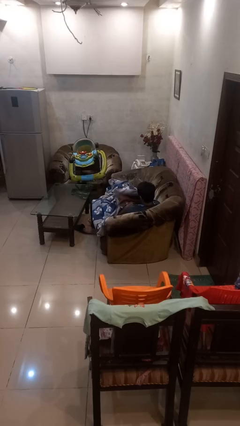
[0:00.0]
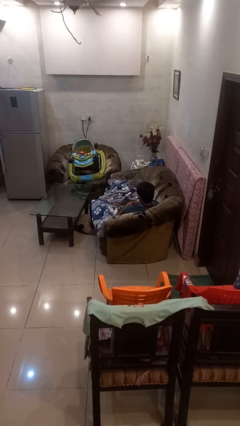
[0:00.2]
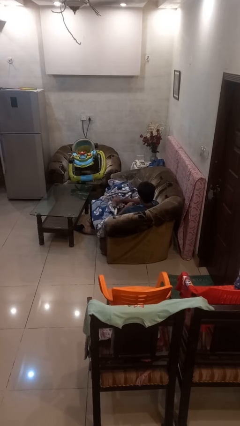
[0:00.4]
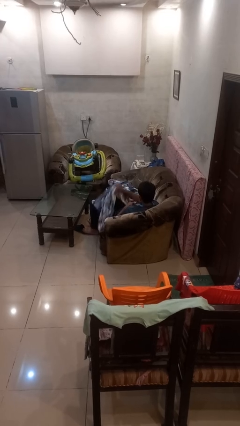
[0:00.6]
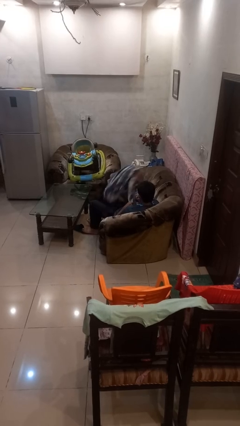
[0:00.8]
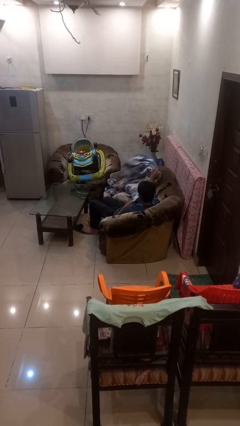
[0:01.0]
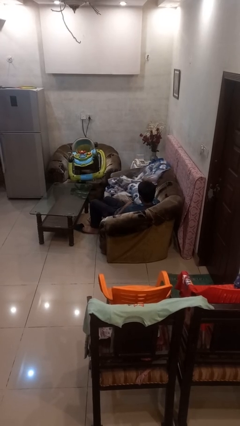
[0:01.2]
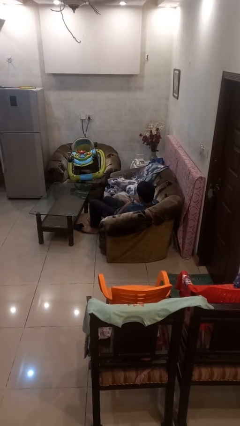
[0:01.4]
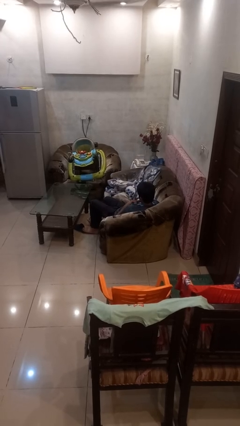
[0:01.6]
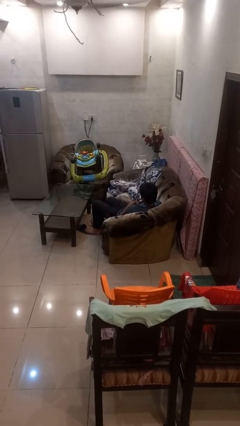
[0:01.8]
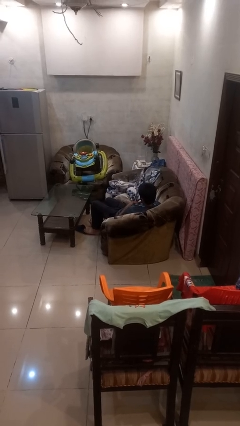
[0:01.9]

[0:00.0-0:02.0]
person uncovers with blanket

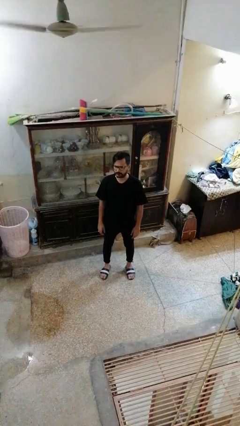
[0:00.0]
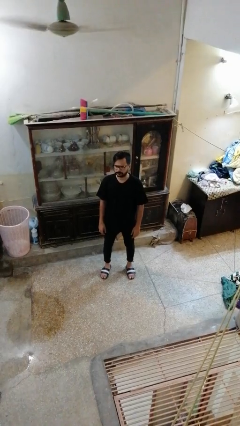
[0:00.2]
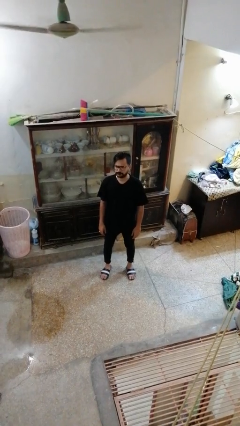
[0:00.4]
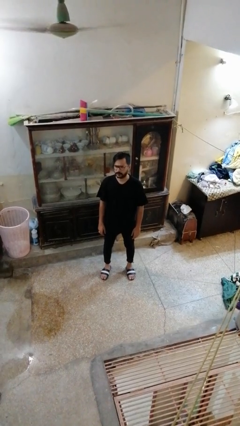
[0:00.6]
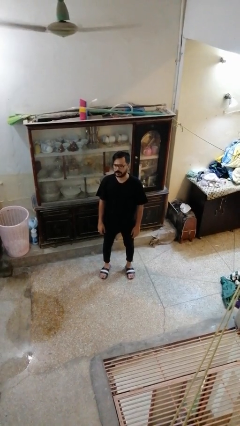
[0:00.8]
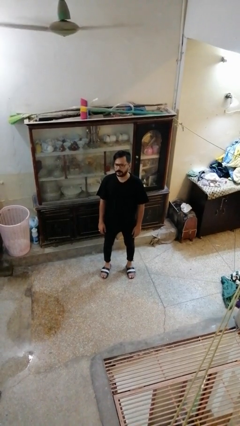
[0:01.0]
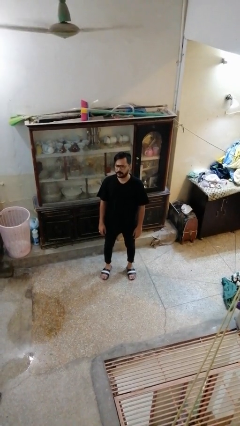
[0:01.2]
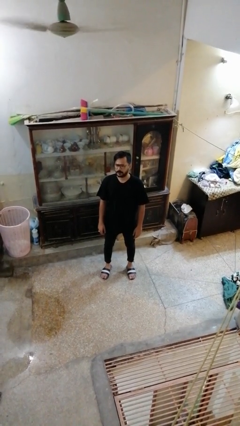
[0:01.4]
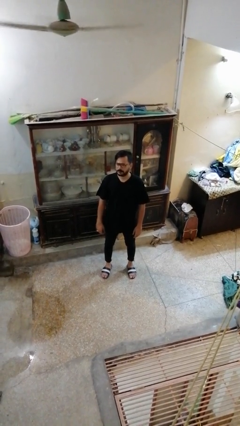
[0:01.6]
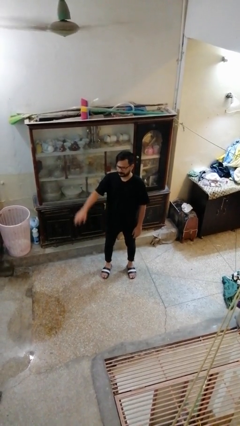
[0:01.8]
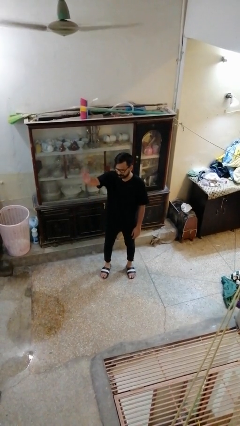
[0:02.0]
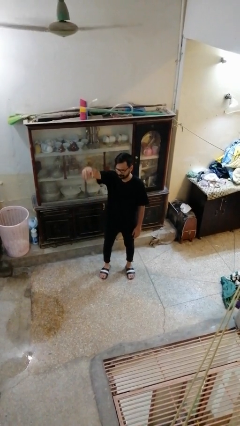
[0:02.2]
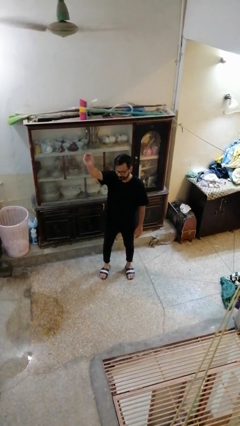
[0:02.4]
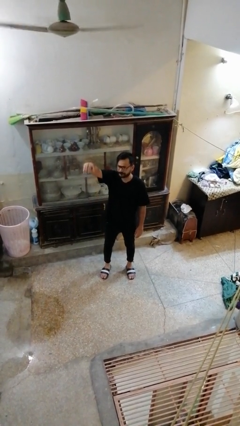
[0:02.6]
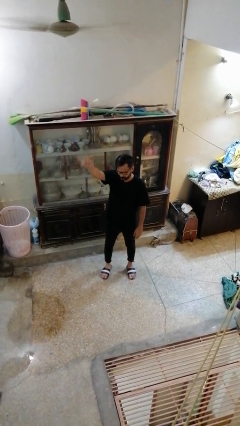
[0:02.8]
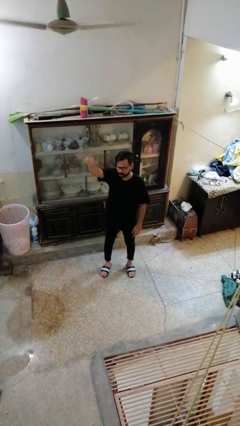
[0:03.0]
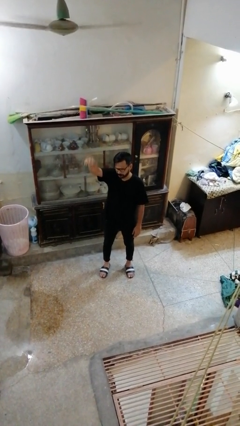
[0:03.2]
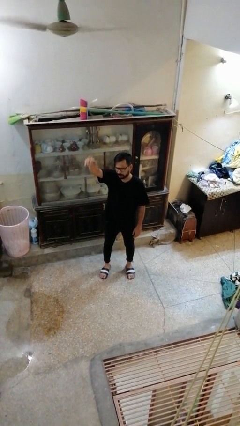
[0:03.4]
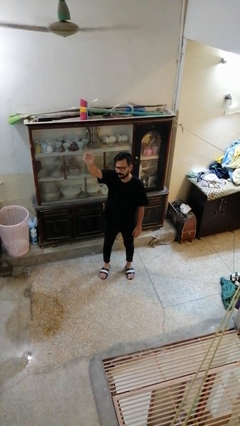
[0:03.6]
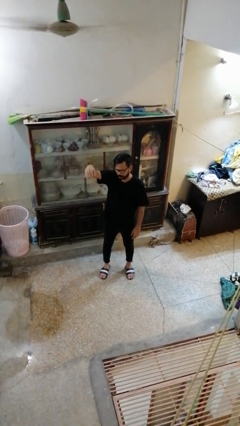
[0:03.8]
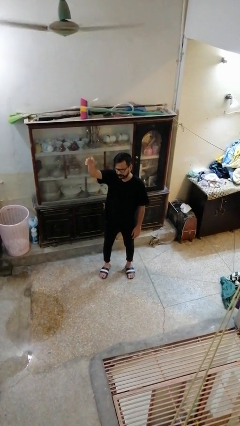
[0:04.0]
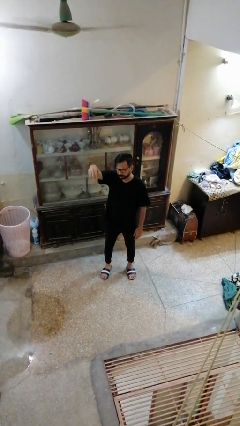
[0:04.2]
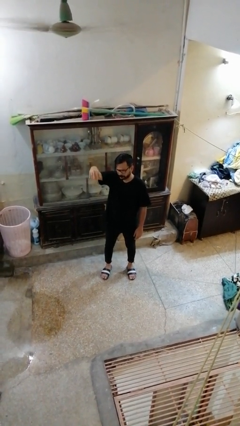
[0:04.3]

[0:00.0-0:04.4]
person gestures come here

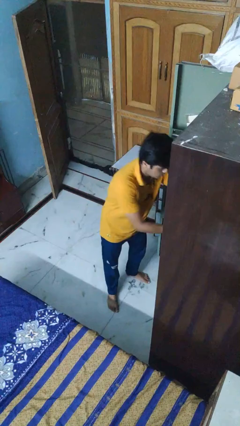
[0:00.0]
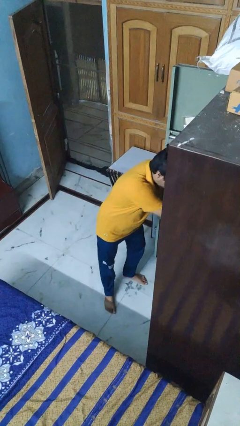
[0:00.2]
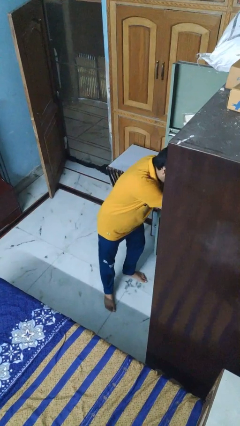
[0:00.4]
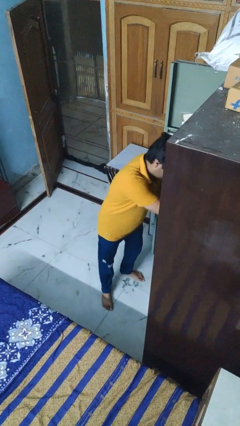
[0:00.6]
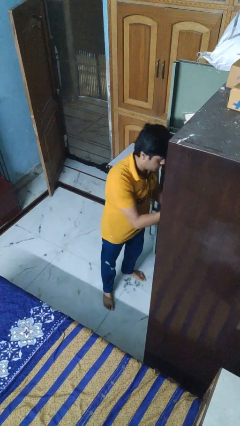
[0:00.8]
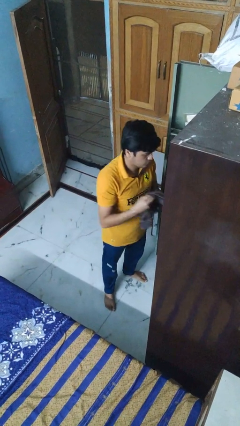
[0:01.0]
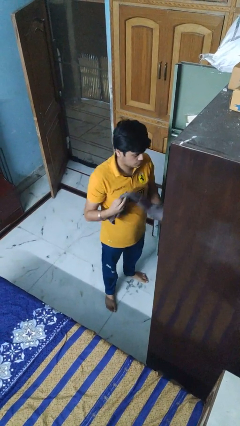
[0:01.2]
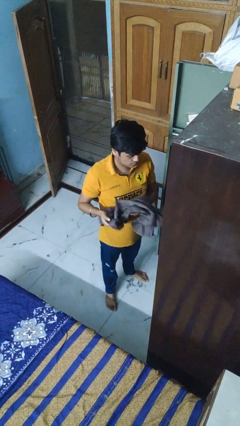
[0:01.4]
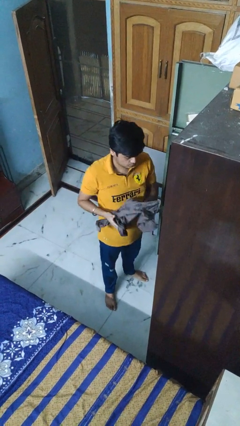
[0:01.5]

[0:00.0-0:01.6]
person takes clothes from dresser

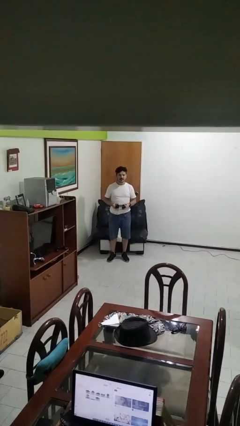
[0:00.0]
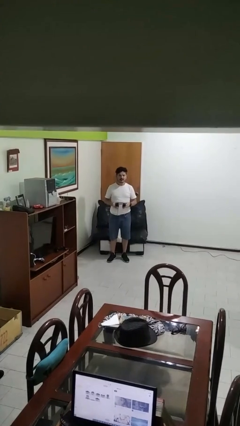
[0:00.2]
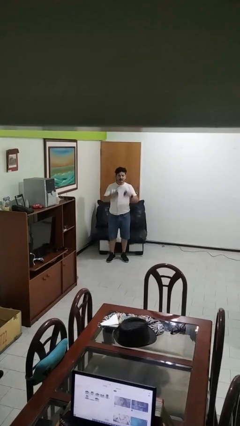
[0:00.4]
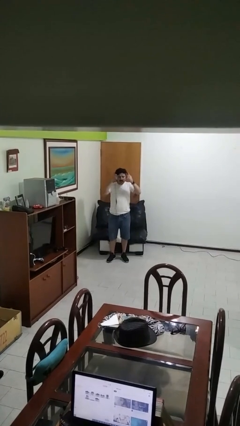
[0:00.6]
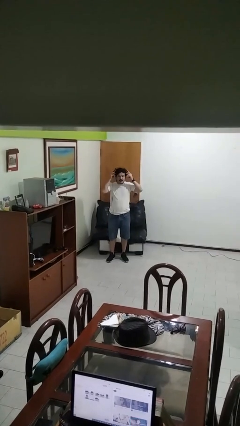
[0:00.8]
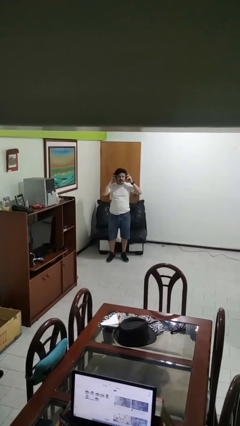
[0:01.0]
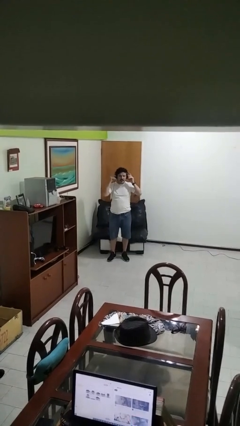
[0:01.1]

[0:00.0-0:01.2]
person puts on headphones

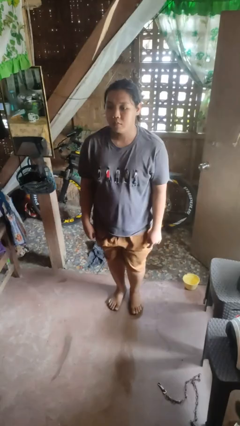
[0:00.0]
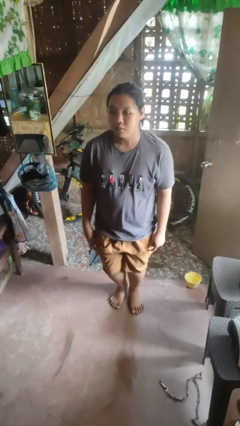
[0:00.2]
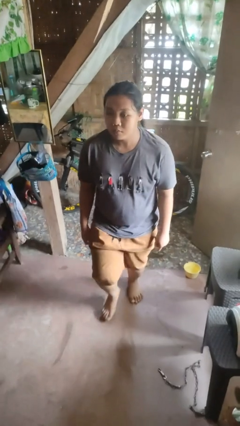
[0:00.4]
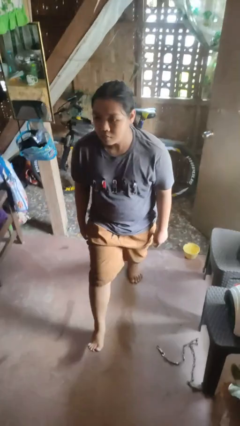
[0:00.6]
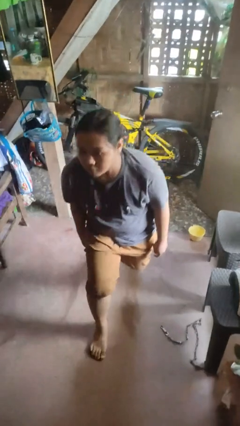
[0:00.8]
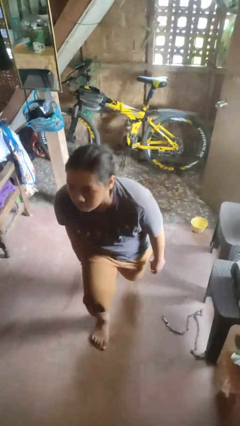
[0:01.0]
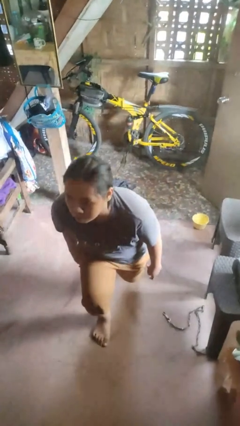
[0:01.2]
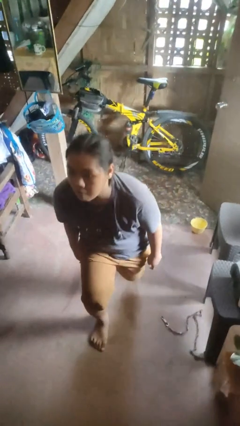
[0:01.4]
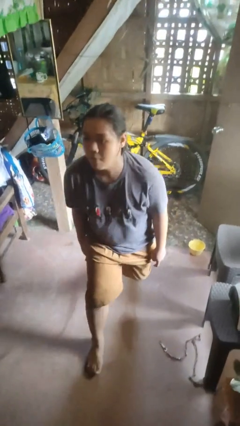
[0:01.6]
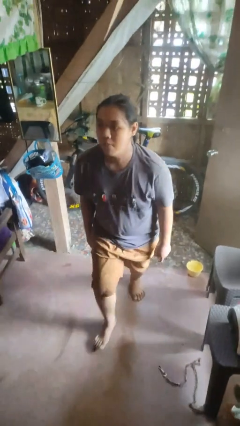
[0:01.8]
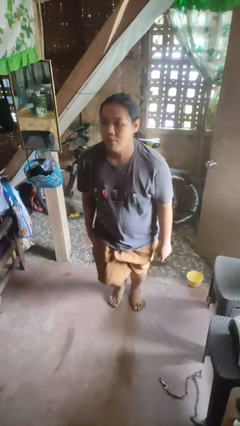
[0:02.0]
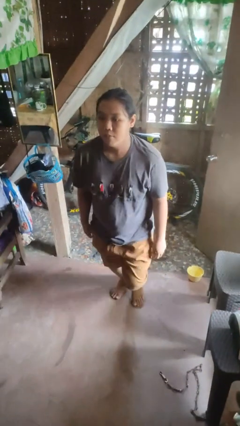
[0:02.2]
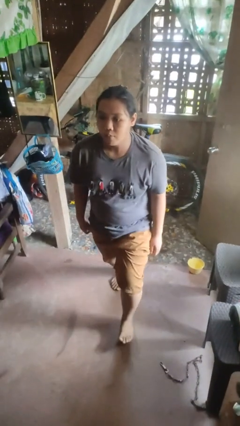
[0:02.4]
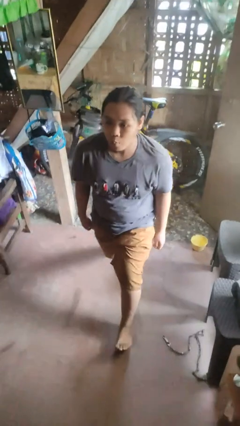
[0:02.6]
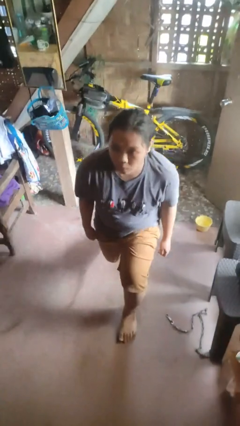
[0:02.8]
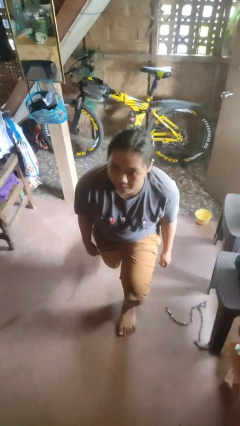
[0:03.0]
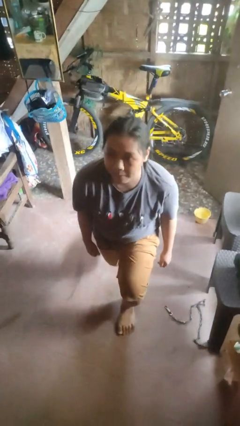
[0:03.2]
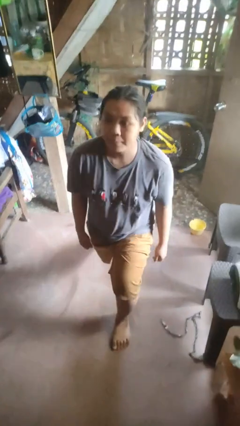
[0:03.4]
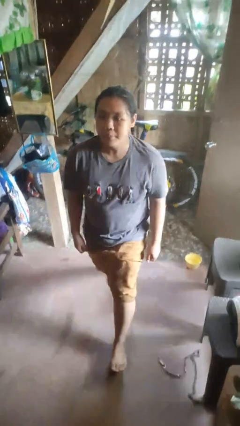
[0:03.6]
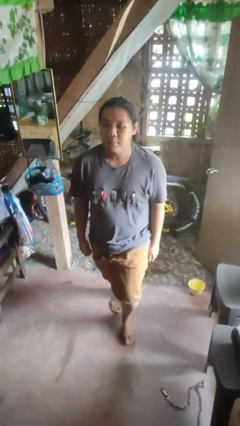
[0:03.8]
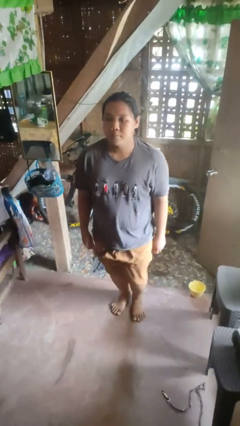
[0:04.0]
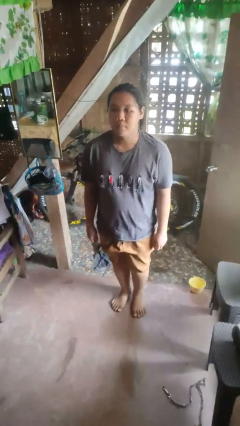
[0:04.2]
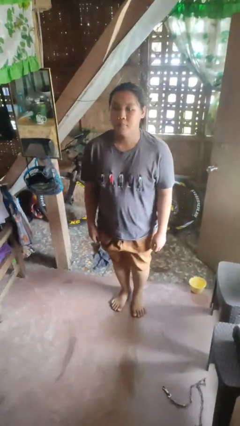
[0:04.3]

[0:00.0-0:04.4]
person exercises with lunges

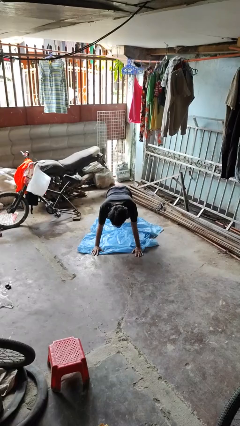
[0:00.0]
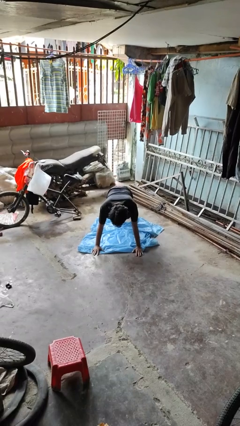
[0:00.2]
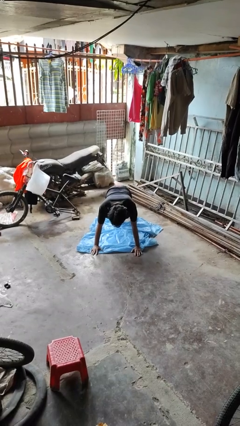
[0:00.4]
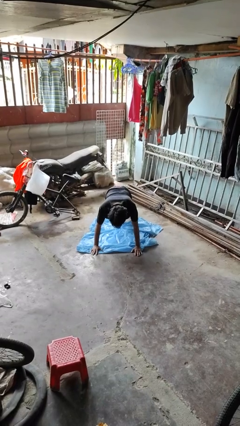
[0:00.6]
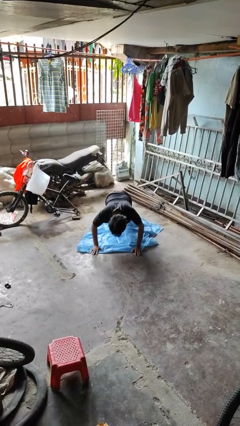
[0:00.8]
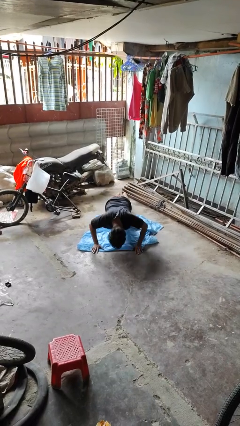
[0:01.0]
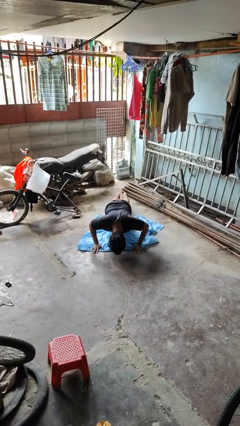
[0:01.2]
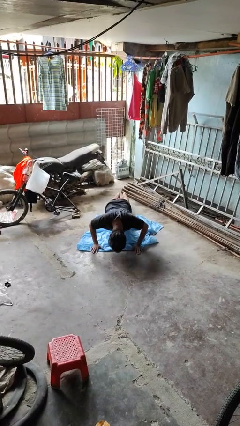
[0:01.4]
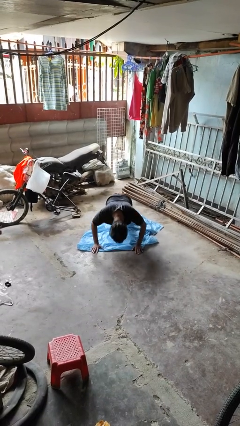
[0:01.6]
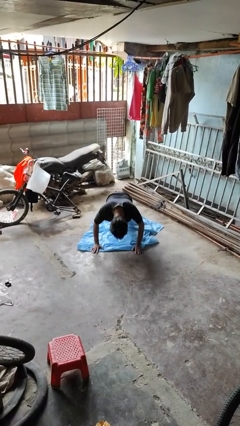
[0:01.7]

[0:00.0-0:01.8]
person exercises with pushup

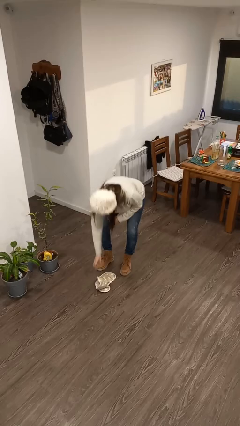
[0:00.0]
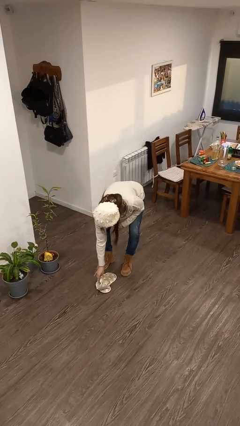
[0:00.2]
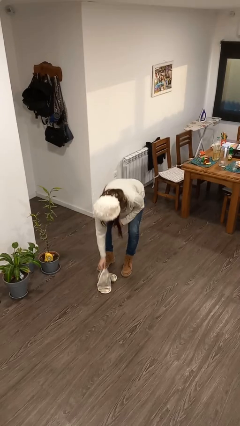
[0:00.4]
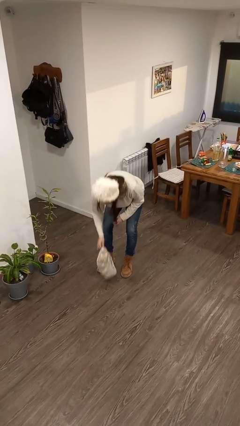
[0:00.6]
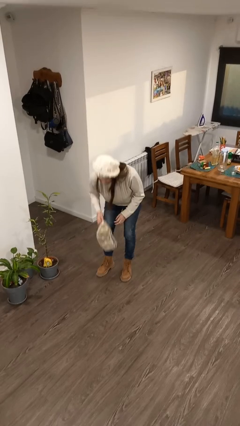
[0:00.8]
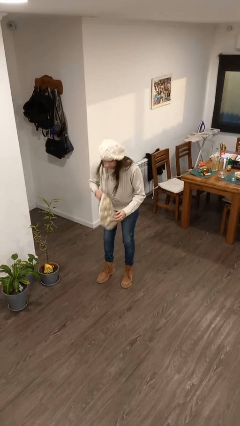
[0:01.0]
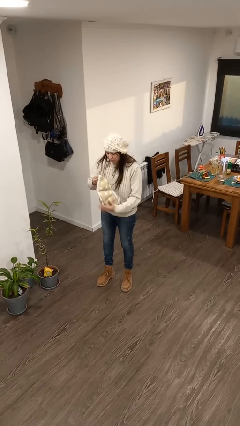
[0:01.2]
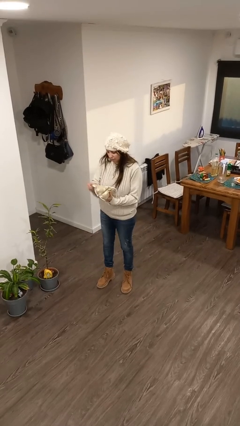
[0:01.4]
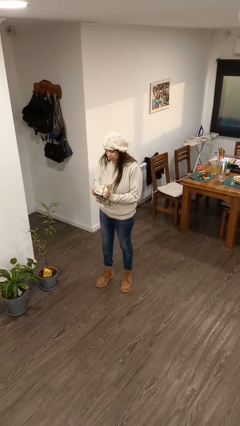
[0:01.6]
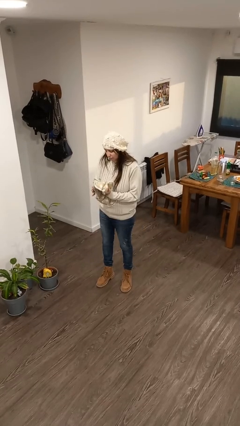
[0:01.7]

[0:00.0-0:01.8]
person picks up object from floor
